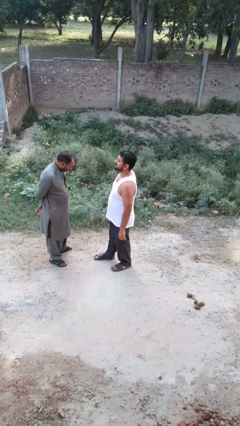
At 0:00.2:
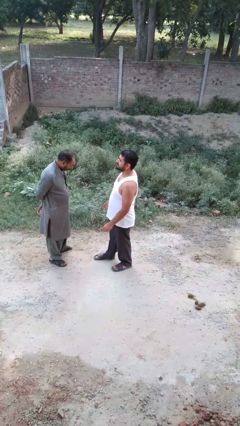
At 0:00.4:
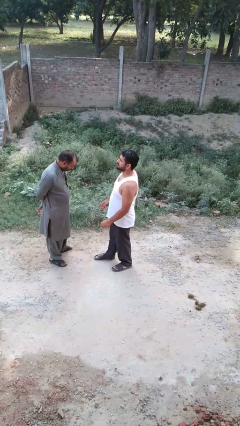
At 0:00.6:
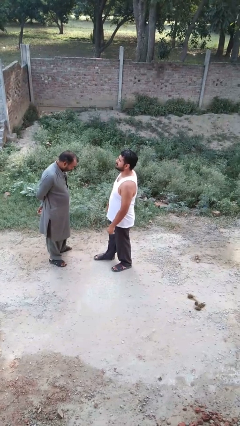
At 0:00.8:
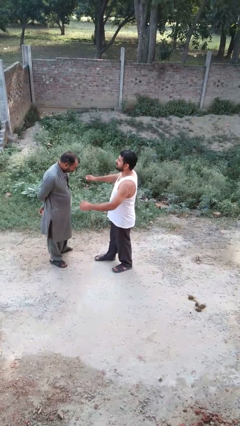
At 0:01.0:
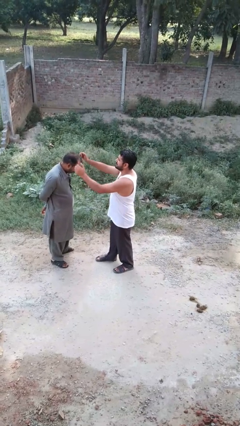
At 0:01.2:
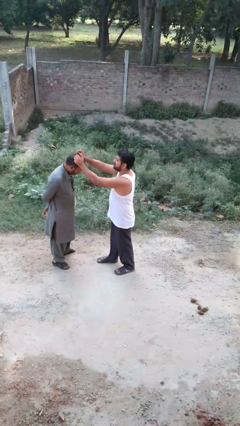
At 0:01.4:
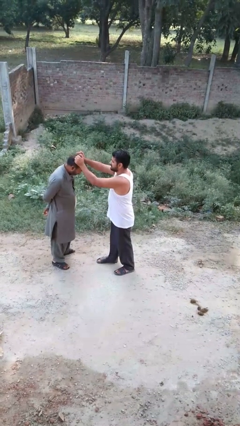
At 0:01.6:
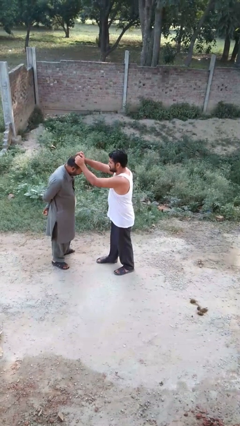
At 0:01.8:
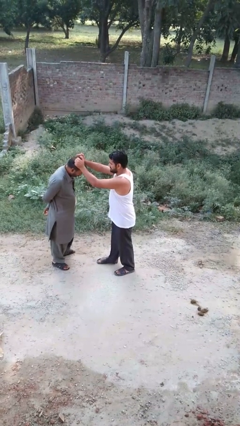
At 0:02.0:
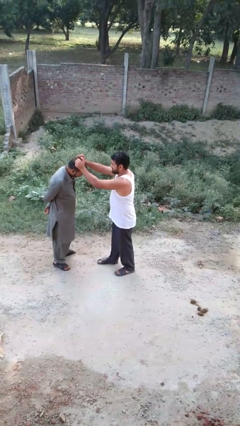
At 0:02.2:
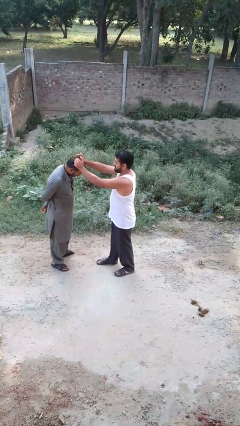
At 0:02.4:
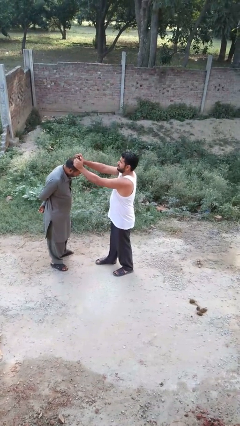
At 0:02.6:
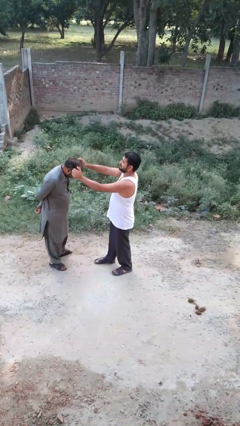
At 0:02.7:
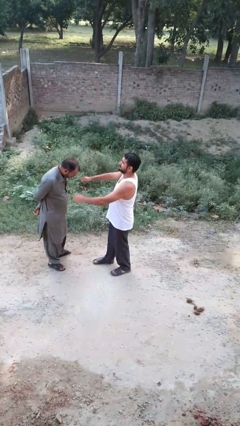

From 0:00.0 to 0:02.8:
person grabs person by hair

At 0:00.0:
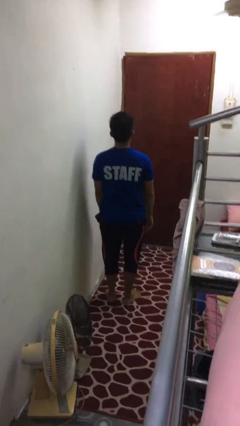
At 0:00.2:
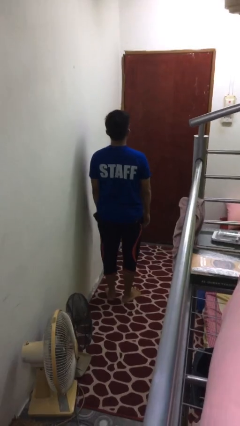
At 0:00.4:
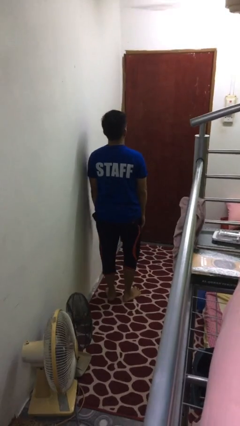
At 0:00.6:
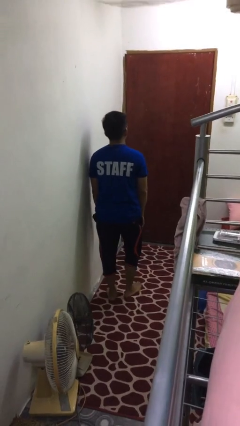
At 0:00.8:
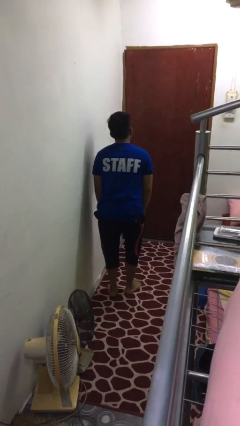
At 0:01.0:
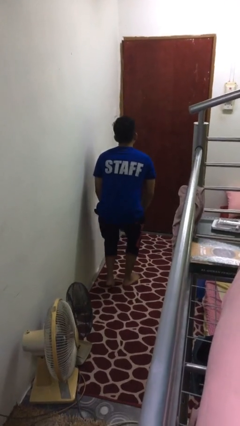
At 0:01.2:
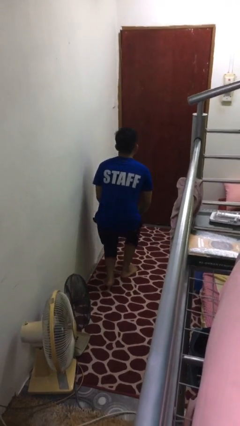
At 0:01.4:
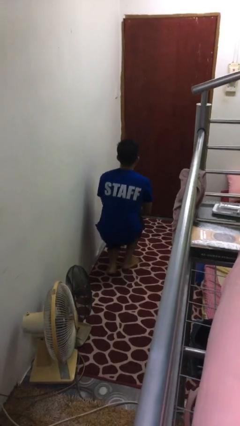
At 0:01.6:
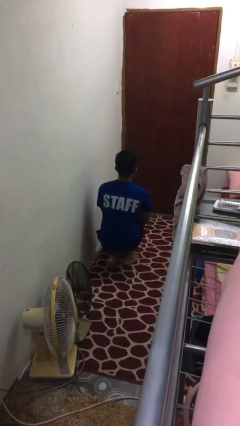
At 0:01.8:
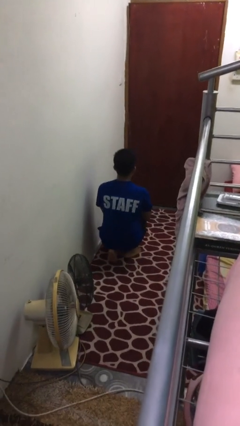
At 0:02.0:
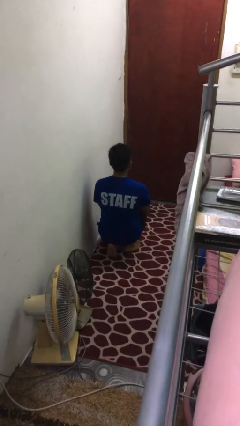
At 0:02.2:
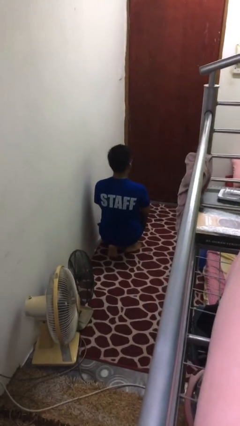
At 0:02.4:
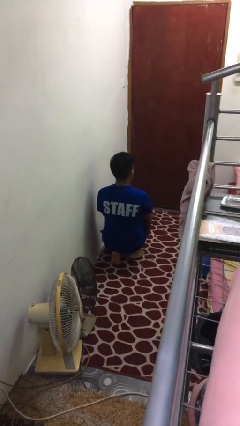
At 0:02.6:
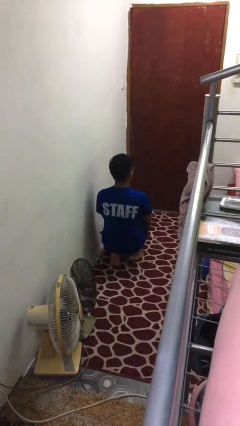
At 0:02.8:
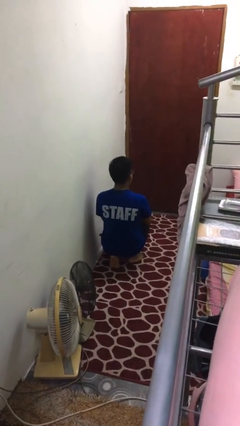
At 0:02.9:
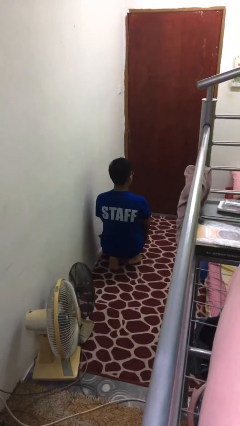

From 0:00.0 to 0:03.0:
person kneels

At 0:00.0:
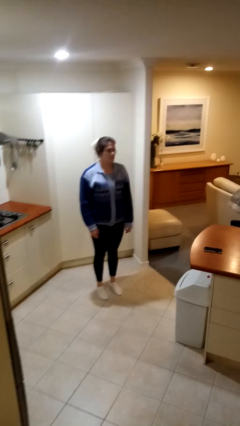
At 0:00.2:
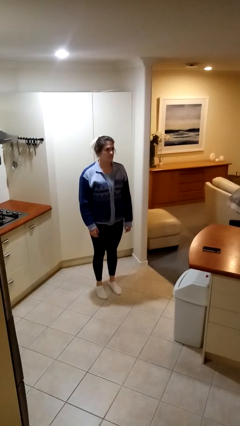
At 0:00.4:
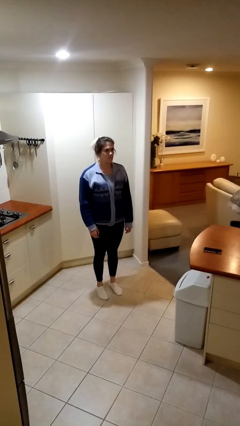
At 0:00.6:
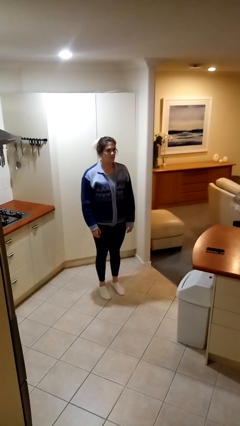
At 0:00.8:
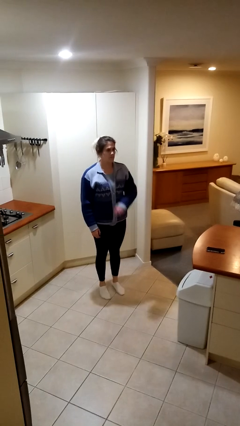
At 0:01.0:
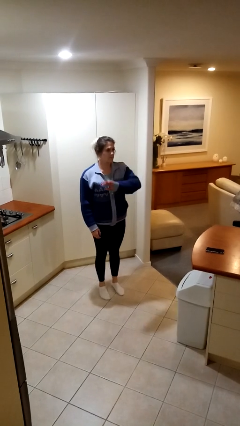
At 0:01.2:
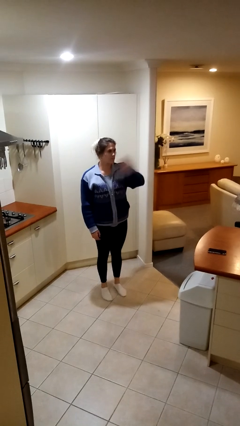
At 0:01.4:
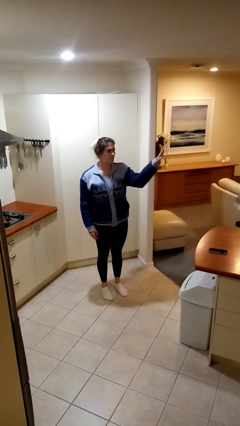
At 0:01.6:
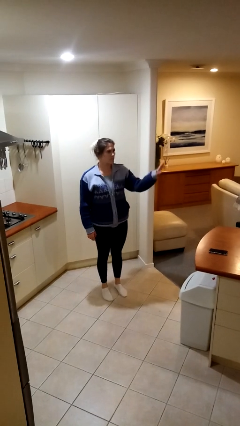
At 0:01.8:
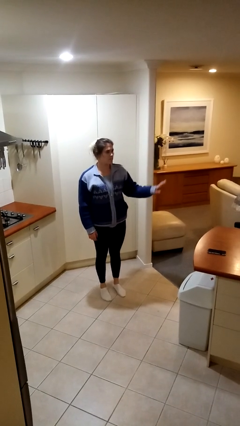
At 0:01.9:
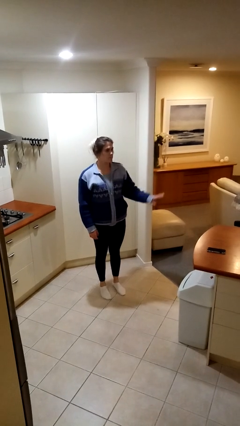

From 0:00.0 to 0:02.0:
person gestures swipe left

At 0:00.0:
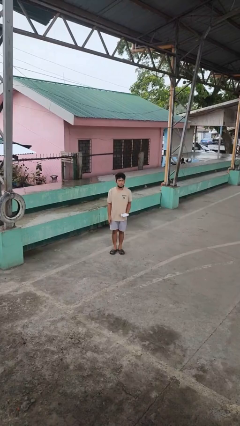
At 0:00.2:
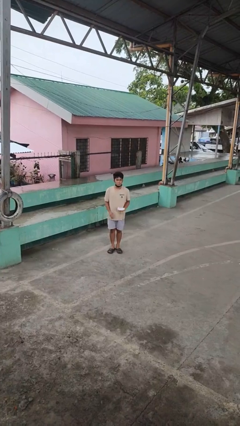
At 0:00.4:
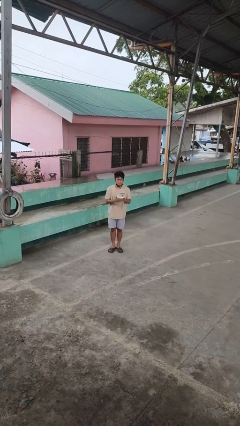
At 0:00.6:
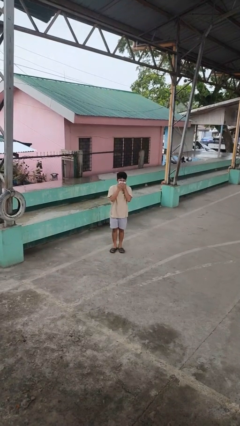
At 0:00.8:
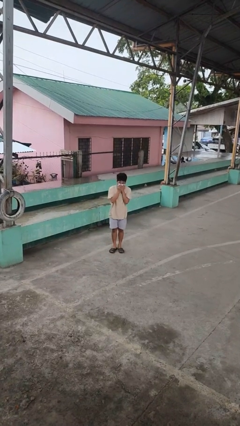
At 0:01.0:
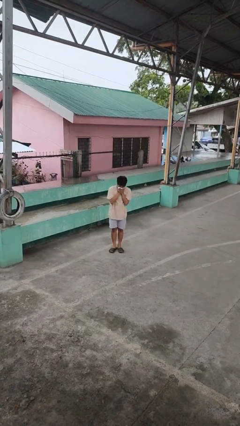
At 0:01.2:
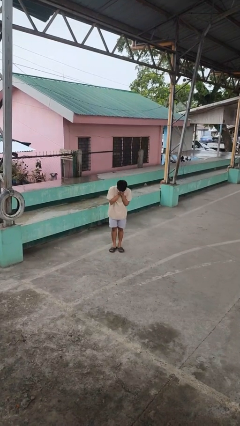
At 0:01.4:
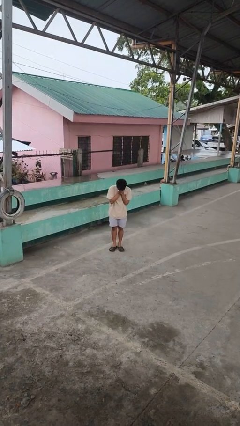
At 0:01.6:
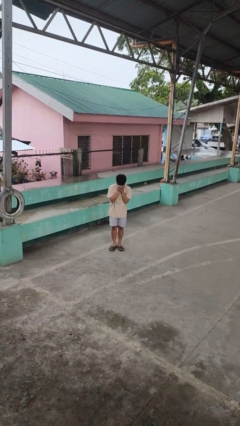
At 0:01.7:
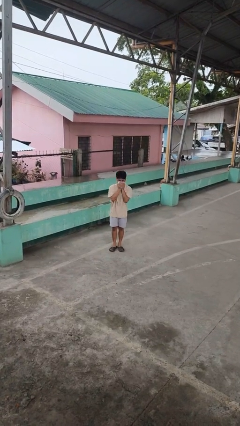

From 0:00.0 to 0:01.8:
person blows nose

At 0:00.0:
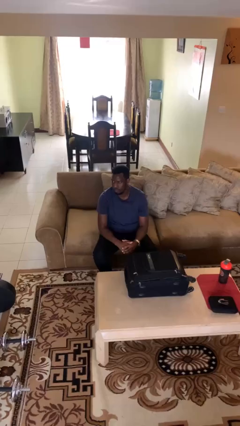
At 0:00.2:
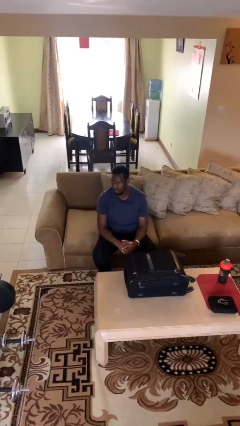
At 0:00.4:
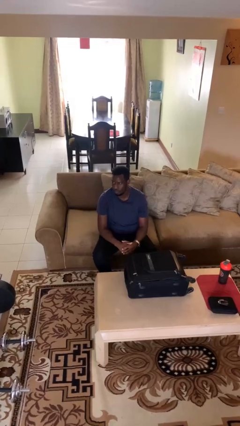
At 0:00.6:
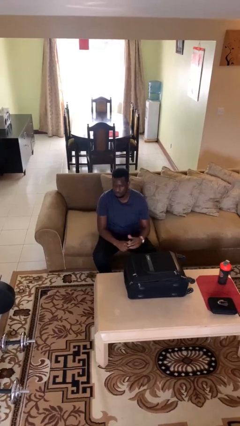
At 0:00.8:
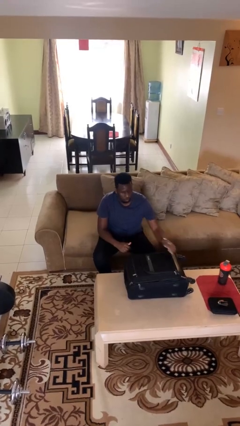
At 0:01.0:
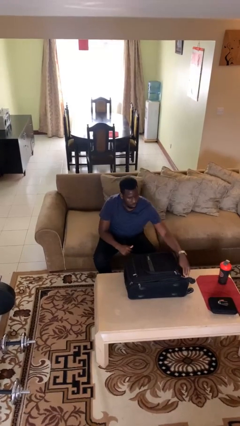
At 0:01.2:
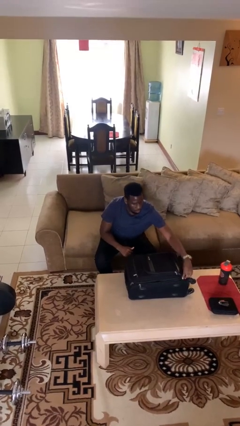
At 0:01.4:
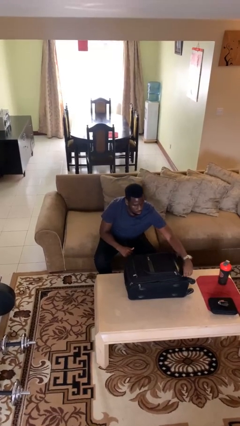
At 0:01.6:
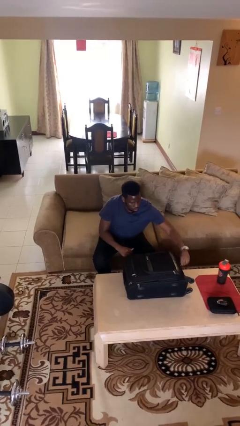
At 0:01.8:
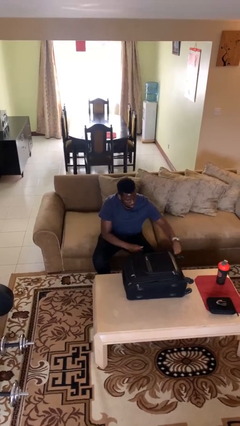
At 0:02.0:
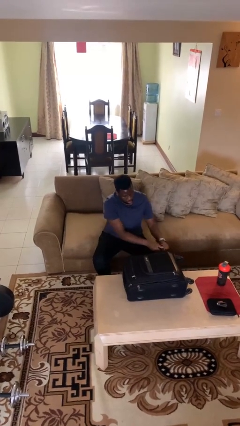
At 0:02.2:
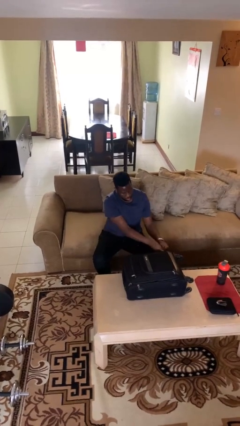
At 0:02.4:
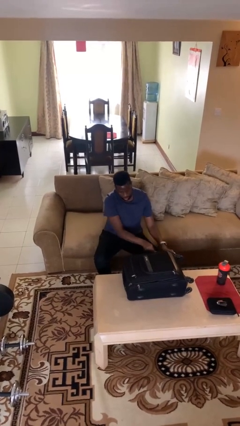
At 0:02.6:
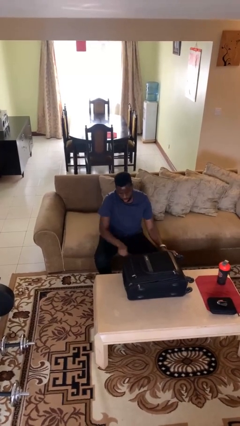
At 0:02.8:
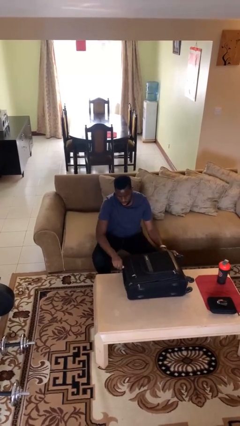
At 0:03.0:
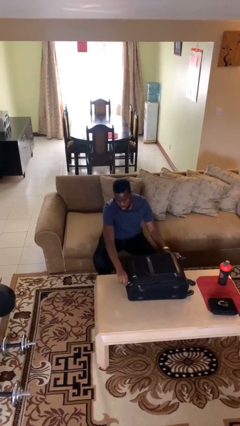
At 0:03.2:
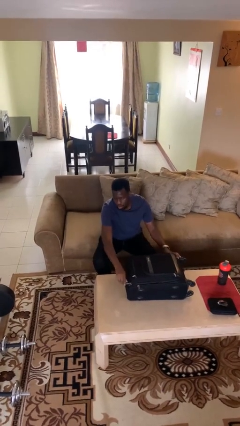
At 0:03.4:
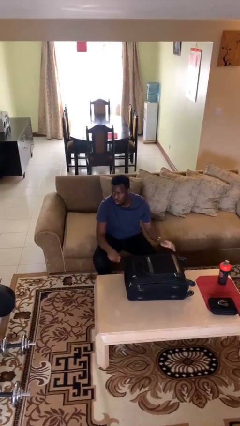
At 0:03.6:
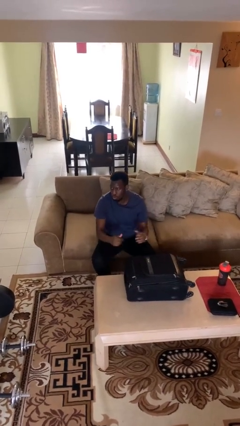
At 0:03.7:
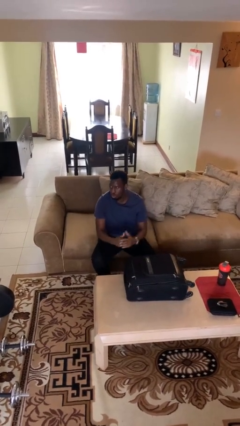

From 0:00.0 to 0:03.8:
person closes suitcase

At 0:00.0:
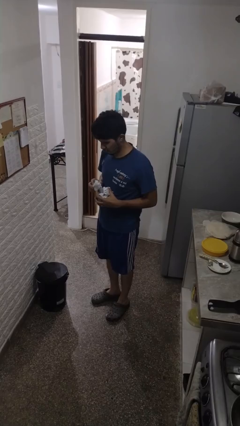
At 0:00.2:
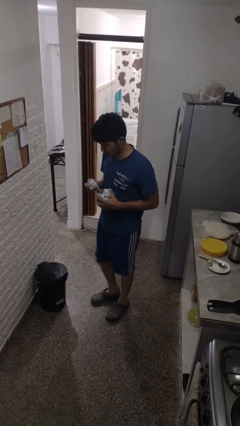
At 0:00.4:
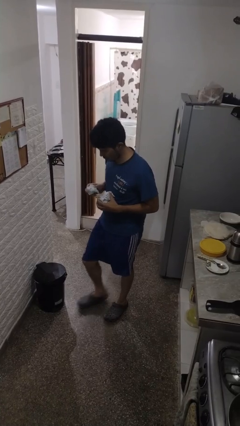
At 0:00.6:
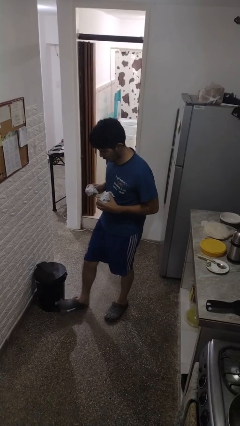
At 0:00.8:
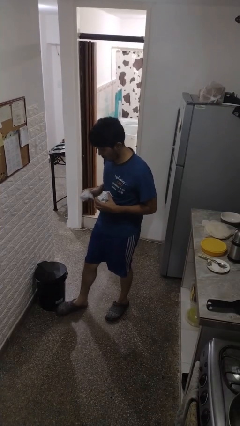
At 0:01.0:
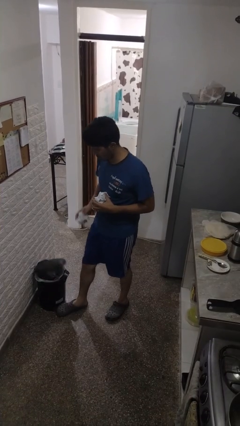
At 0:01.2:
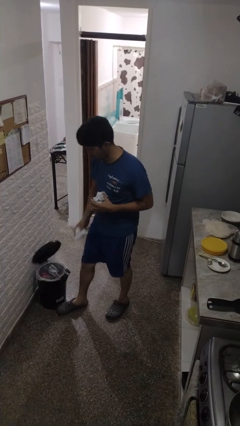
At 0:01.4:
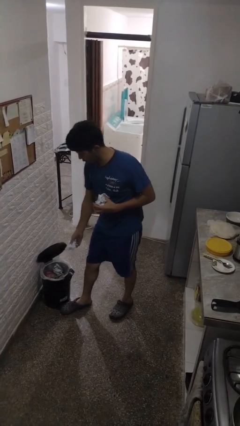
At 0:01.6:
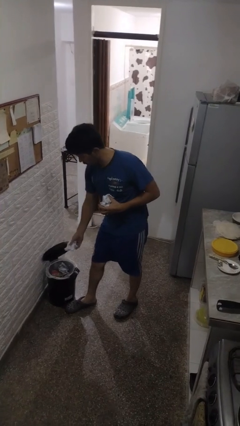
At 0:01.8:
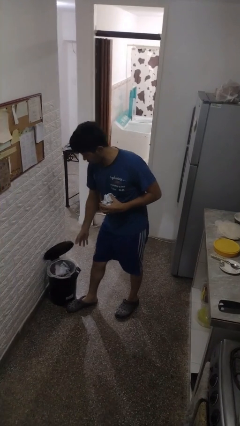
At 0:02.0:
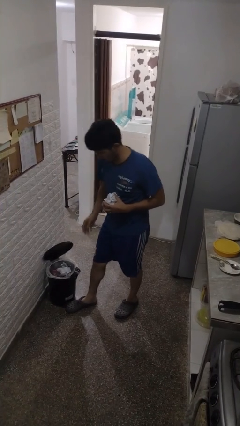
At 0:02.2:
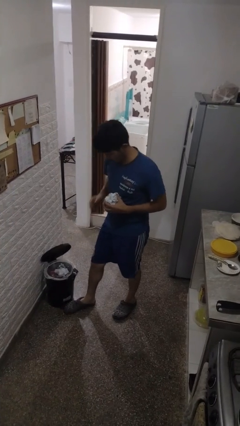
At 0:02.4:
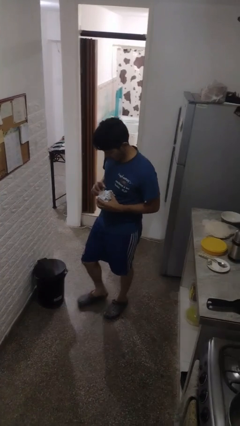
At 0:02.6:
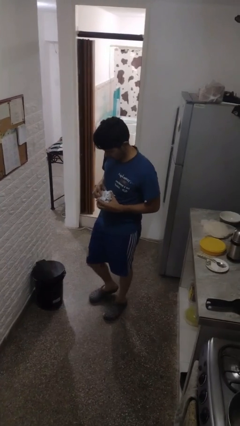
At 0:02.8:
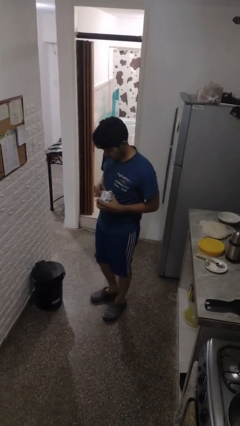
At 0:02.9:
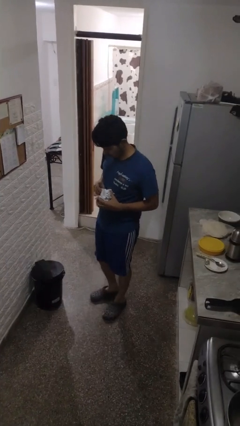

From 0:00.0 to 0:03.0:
person discards trash

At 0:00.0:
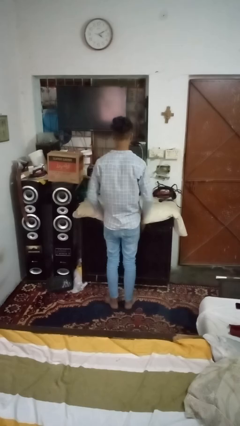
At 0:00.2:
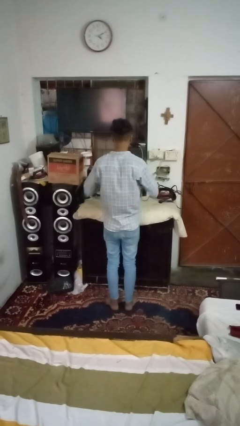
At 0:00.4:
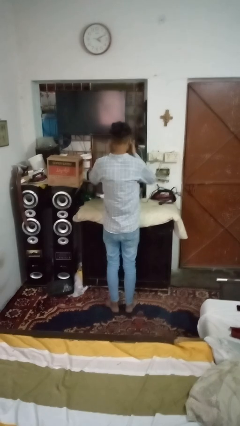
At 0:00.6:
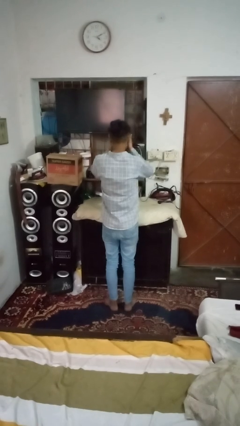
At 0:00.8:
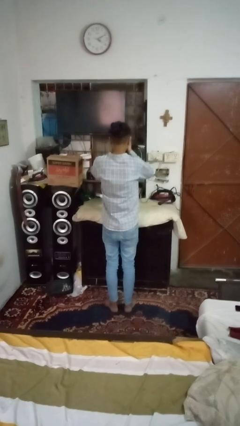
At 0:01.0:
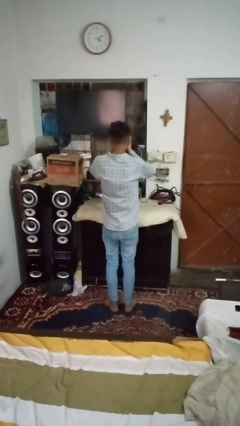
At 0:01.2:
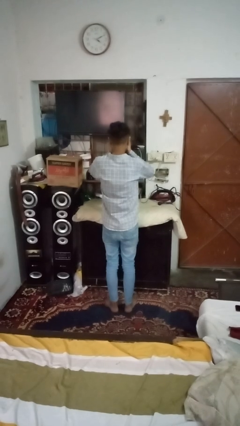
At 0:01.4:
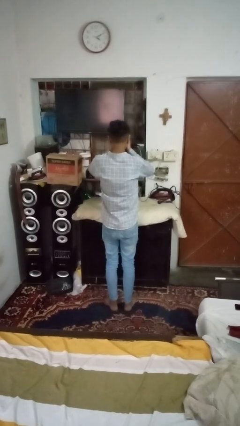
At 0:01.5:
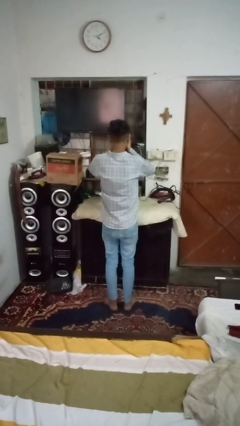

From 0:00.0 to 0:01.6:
person covers face with hands
